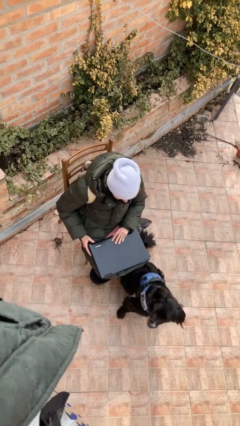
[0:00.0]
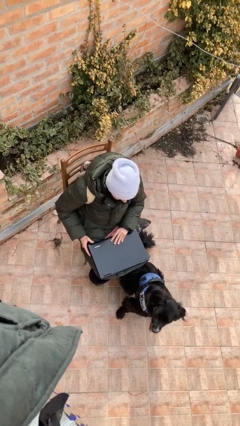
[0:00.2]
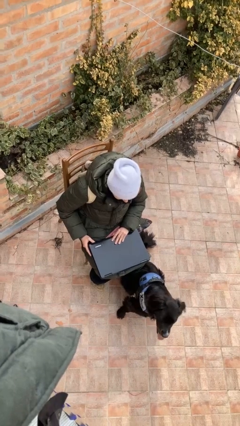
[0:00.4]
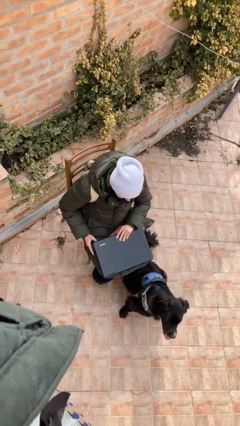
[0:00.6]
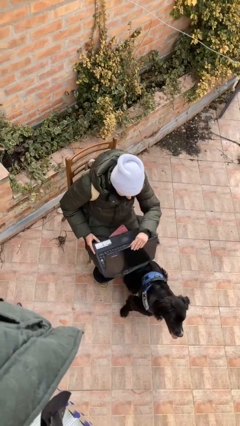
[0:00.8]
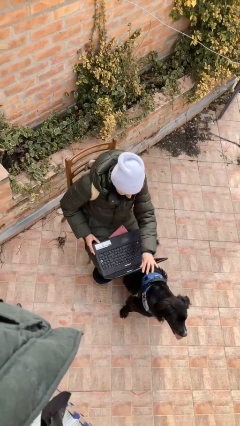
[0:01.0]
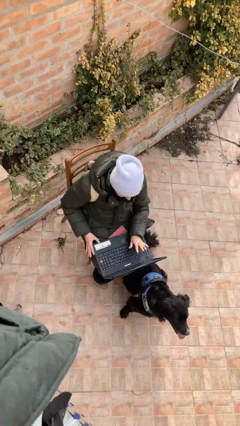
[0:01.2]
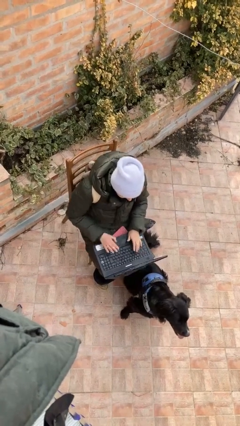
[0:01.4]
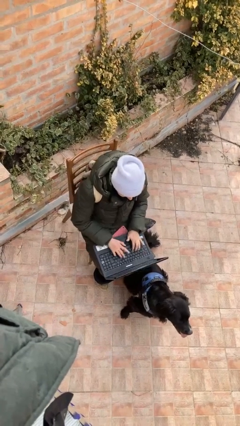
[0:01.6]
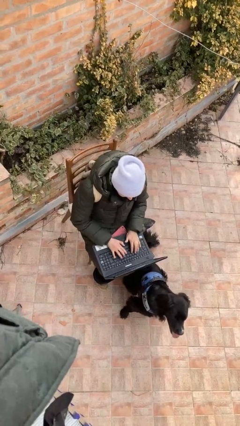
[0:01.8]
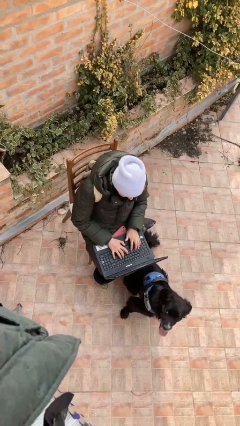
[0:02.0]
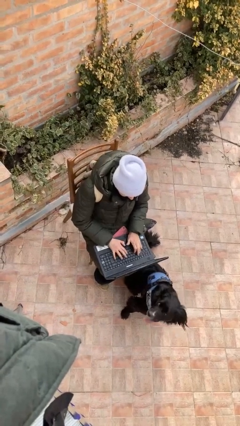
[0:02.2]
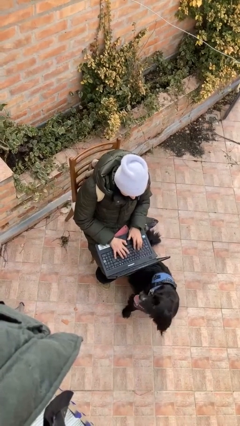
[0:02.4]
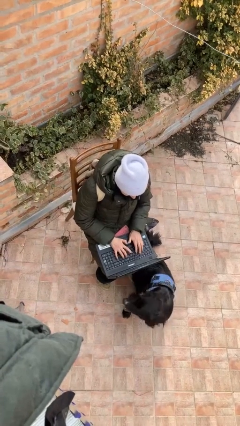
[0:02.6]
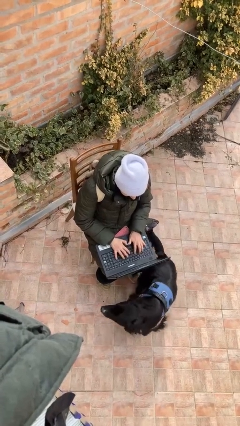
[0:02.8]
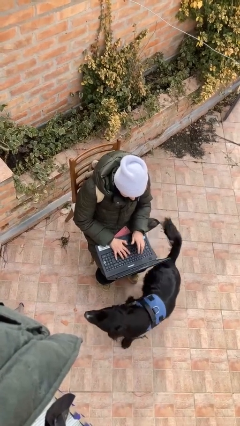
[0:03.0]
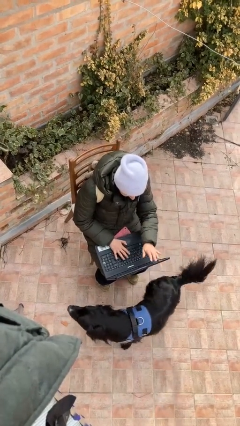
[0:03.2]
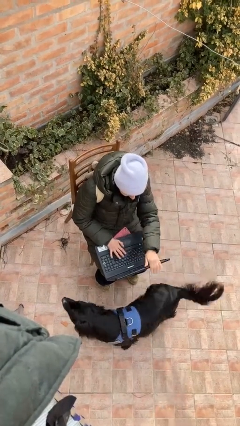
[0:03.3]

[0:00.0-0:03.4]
person interacts with laptop

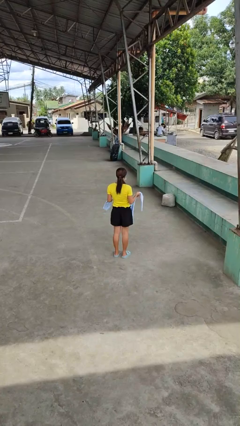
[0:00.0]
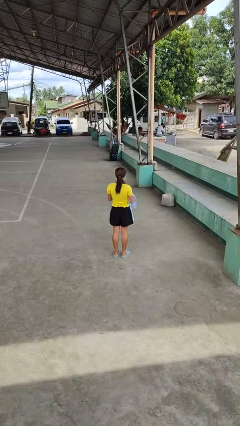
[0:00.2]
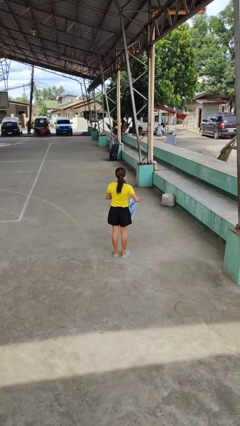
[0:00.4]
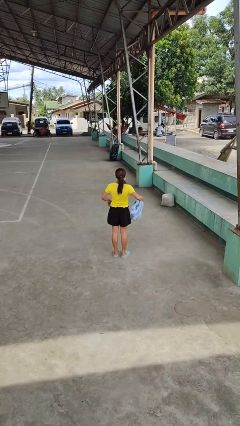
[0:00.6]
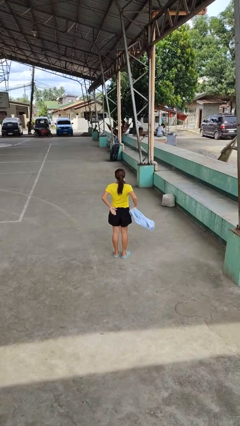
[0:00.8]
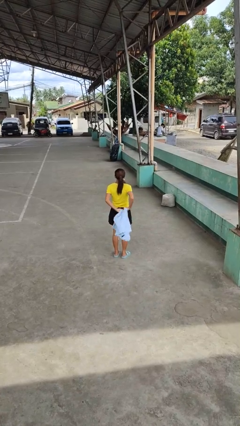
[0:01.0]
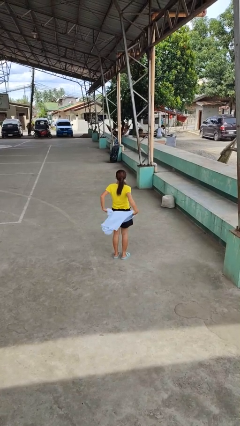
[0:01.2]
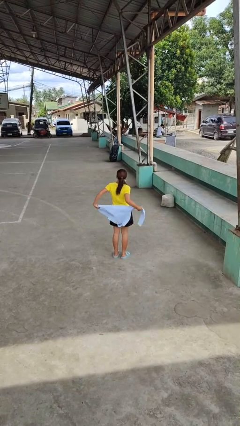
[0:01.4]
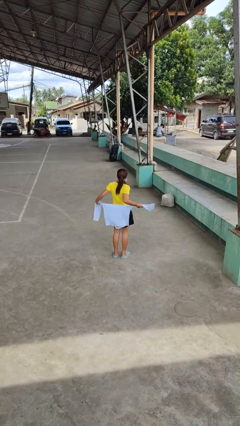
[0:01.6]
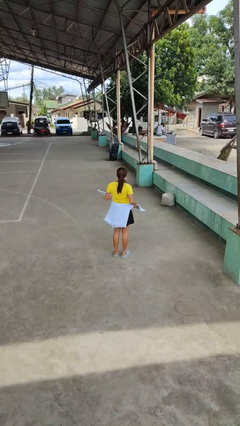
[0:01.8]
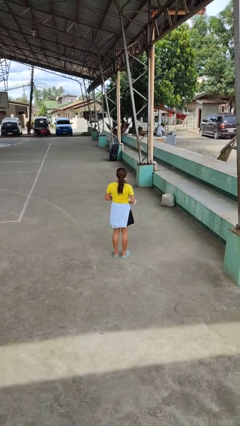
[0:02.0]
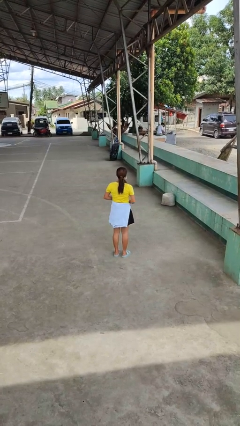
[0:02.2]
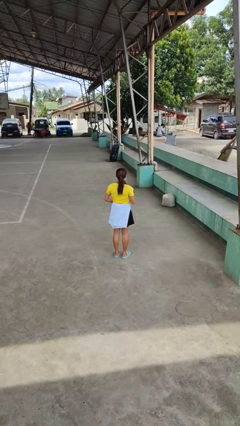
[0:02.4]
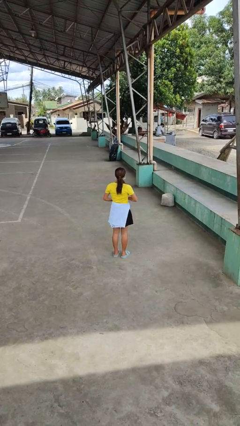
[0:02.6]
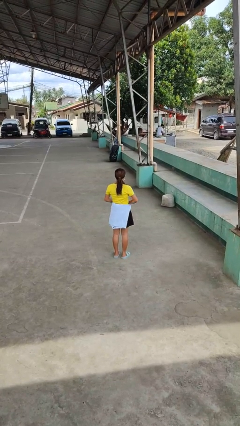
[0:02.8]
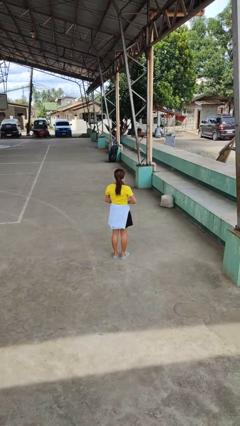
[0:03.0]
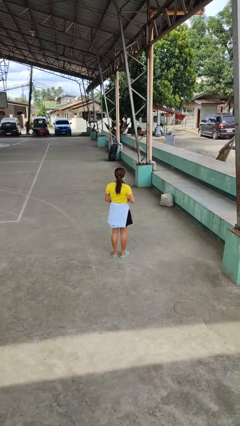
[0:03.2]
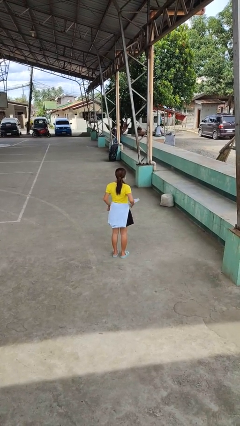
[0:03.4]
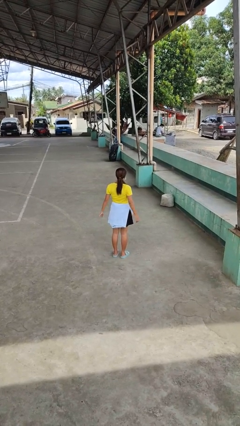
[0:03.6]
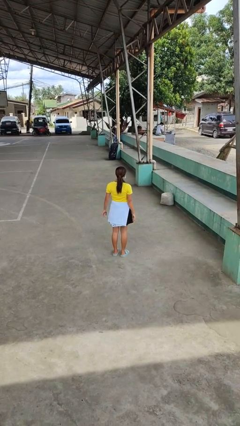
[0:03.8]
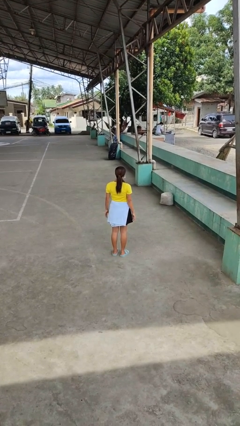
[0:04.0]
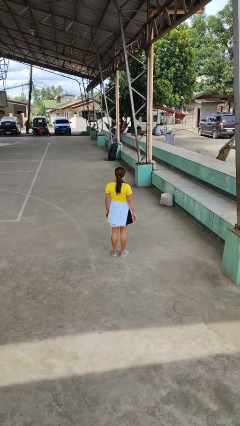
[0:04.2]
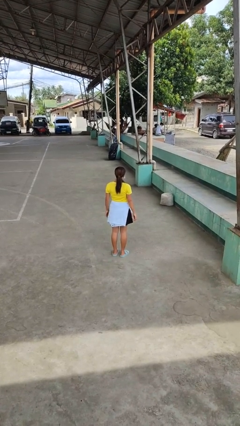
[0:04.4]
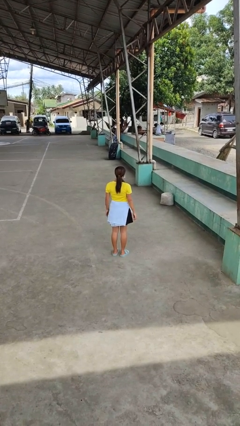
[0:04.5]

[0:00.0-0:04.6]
person ties jacket around waist

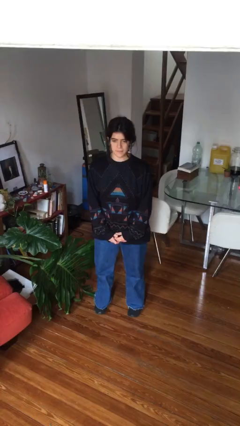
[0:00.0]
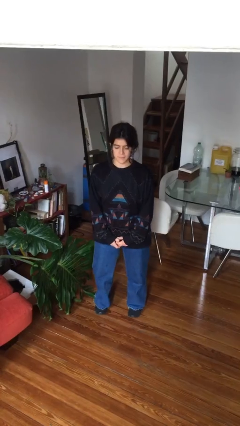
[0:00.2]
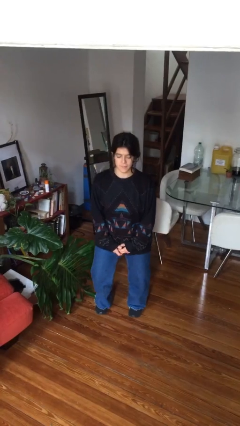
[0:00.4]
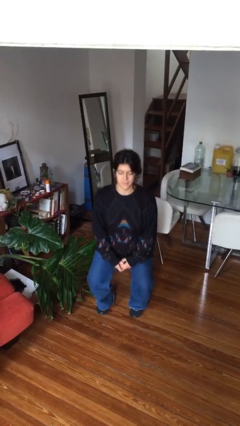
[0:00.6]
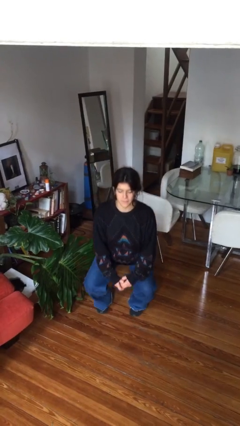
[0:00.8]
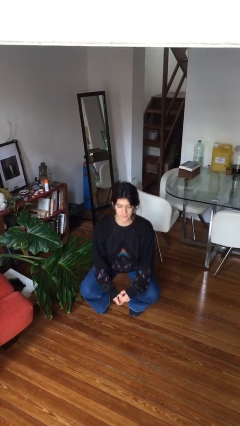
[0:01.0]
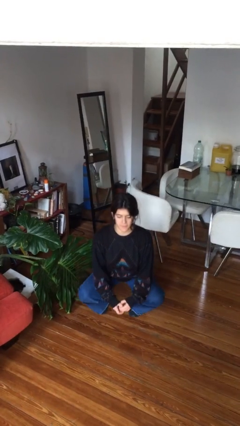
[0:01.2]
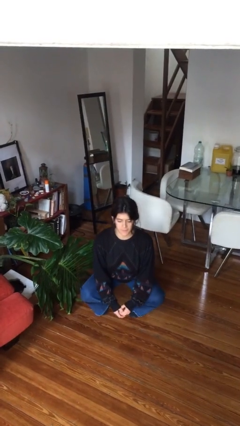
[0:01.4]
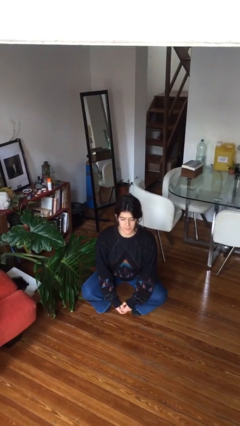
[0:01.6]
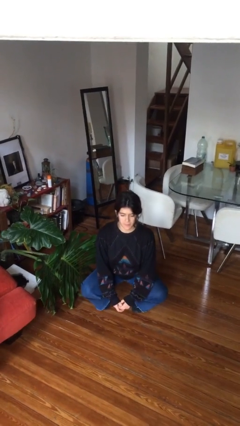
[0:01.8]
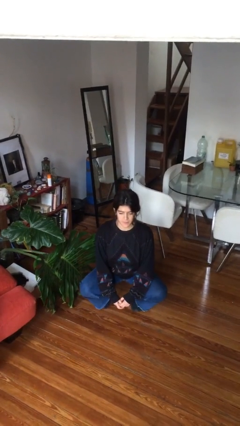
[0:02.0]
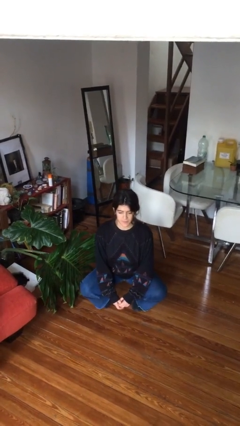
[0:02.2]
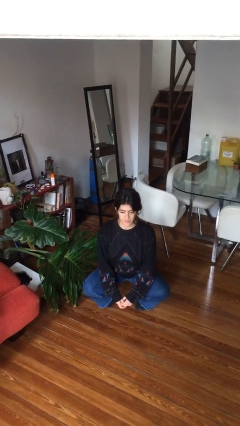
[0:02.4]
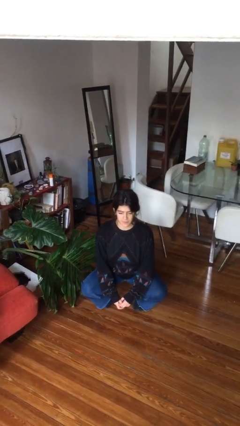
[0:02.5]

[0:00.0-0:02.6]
person squats

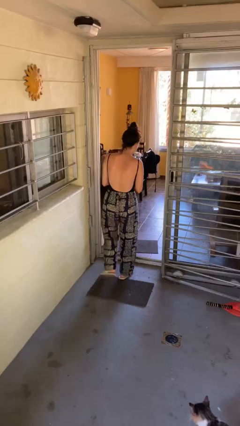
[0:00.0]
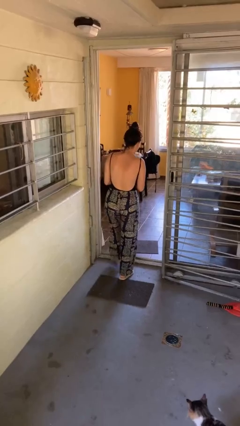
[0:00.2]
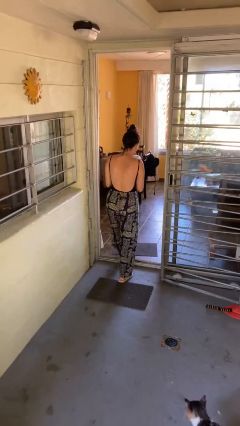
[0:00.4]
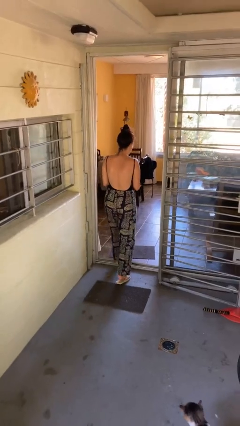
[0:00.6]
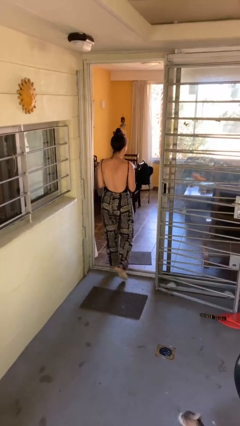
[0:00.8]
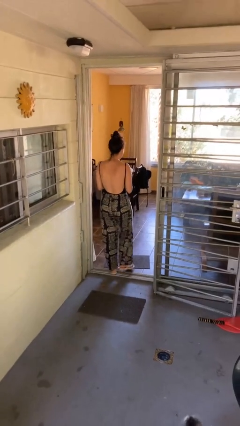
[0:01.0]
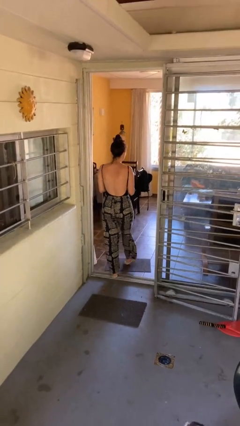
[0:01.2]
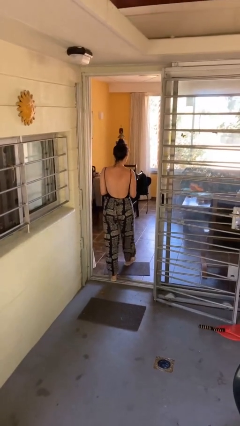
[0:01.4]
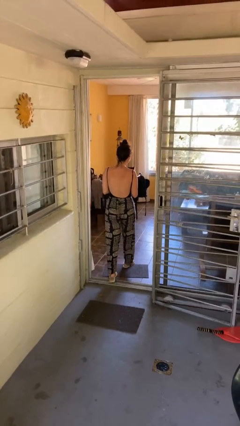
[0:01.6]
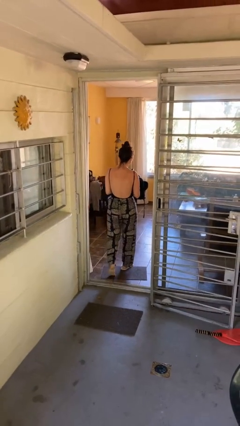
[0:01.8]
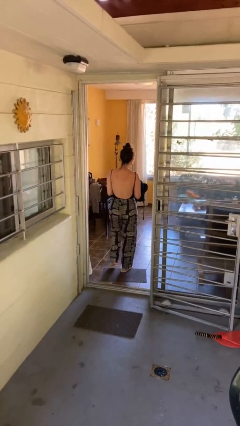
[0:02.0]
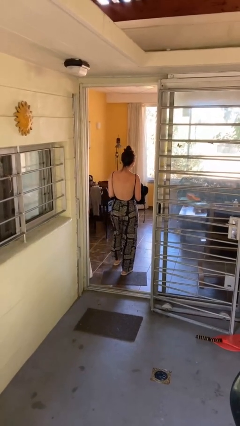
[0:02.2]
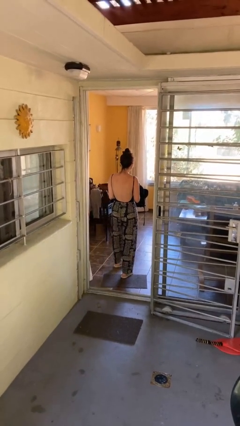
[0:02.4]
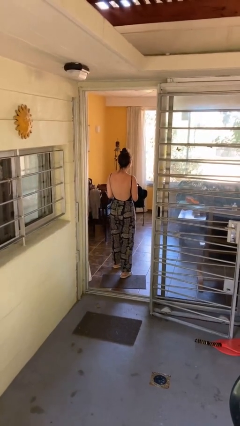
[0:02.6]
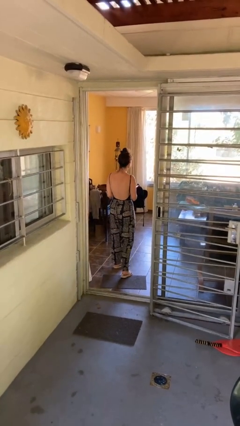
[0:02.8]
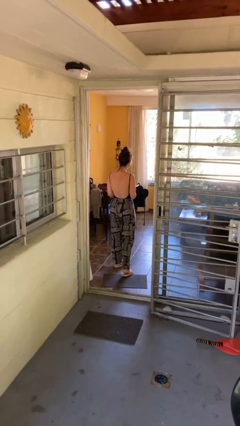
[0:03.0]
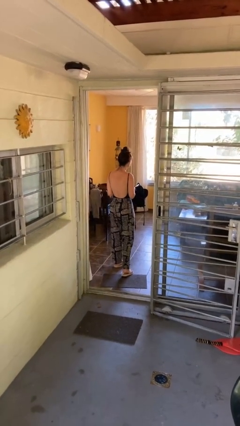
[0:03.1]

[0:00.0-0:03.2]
person exits scene through structure

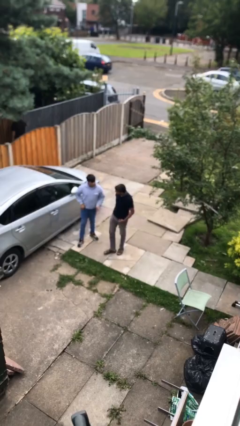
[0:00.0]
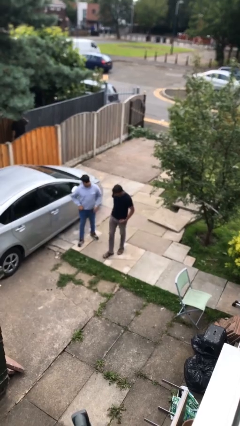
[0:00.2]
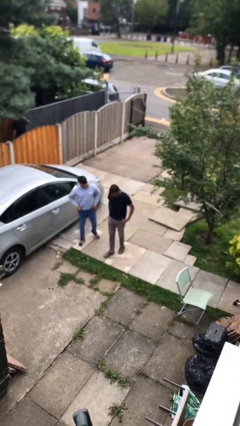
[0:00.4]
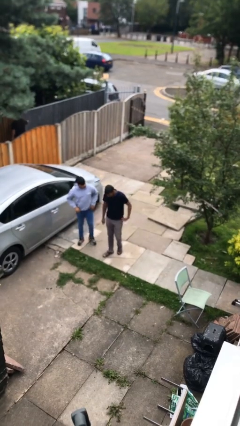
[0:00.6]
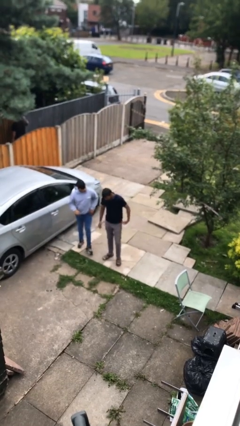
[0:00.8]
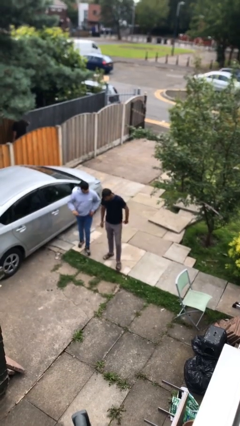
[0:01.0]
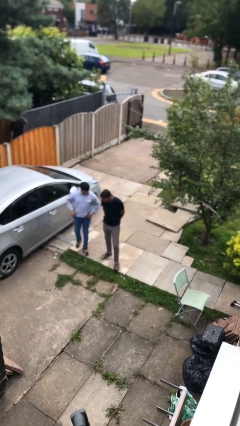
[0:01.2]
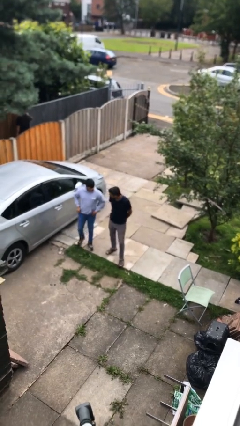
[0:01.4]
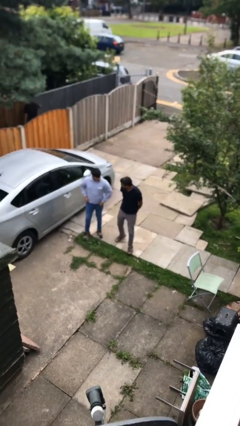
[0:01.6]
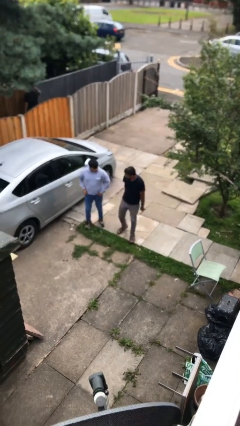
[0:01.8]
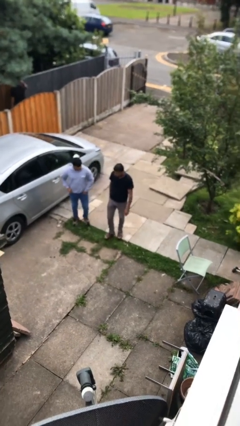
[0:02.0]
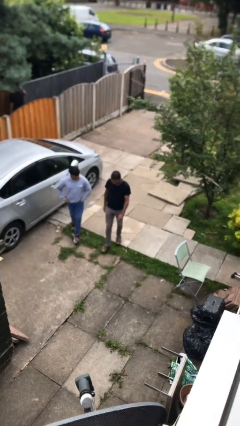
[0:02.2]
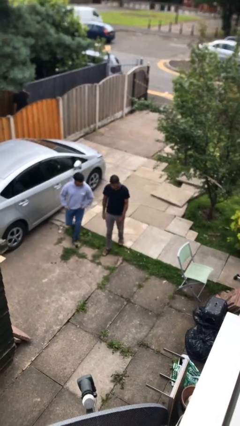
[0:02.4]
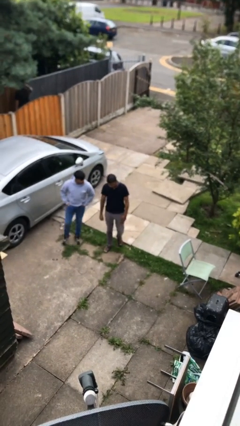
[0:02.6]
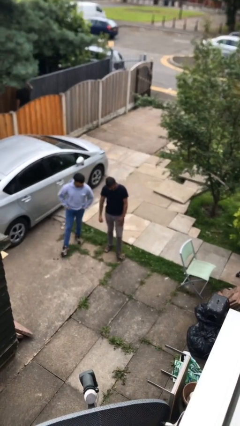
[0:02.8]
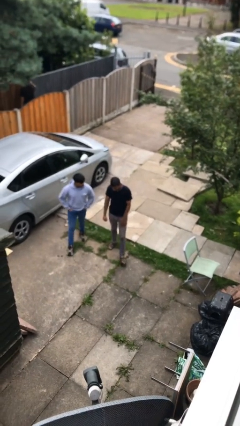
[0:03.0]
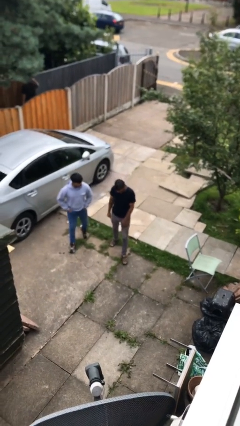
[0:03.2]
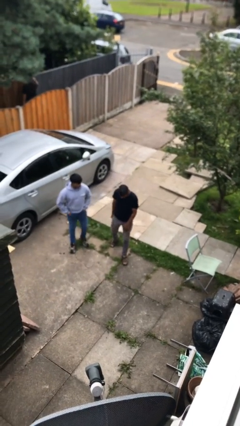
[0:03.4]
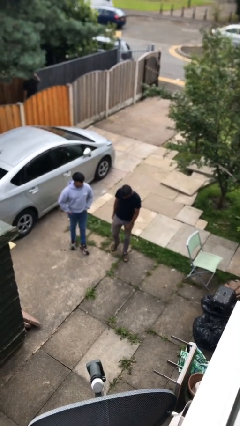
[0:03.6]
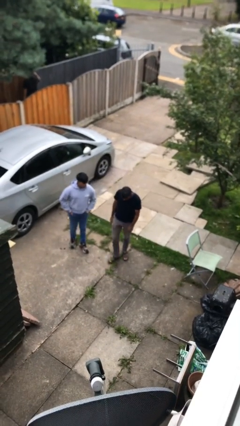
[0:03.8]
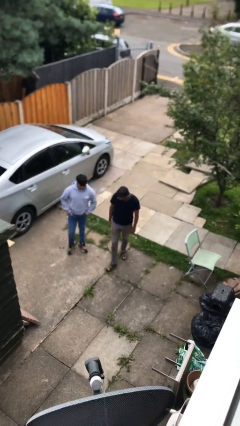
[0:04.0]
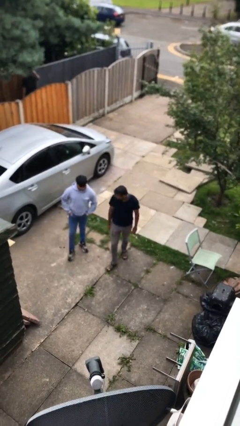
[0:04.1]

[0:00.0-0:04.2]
person talks to person
